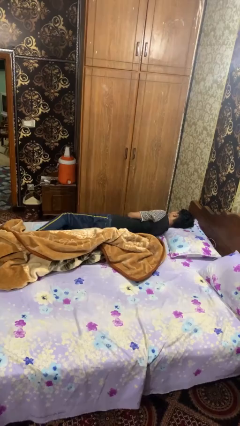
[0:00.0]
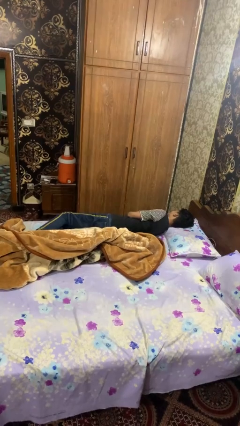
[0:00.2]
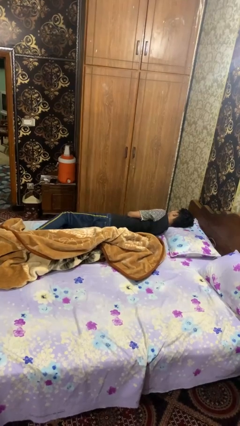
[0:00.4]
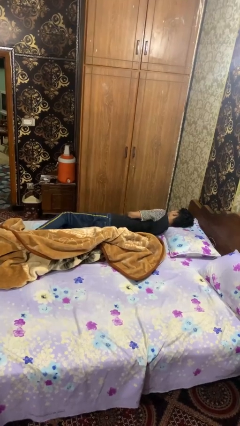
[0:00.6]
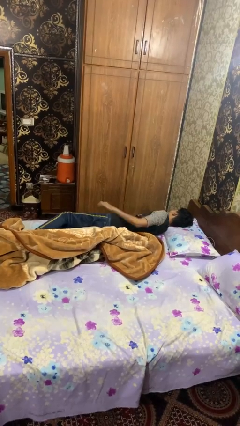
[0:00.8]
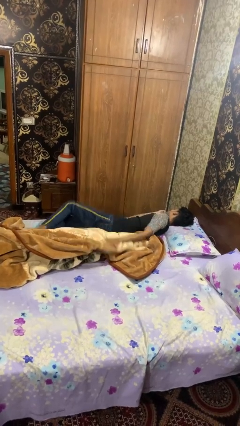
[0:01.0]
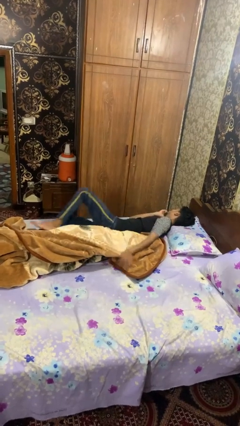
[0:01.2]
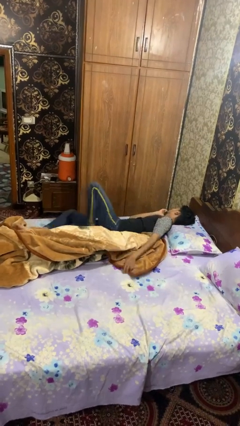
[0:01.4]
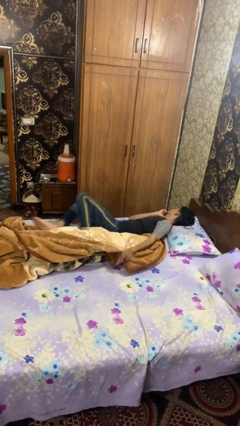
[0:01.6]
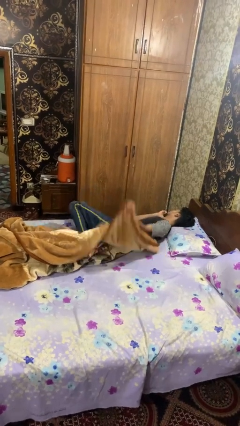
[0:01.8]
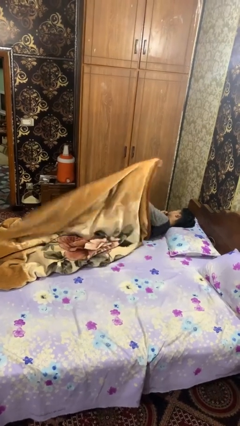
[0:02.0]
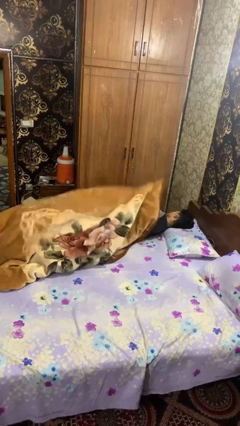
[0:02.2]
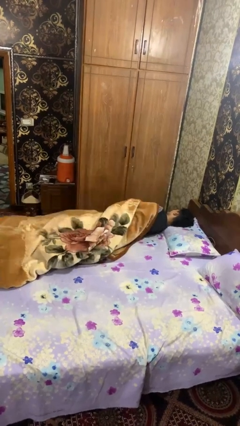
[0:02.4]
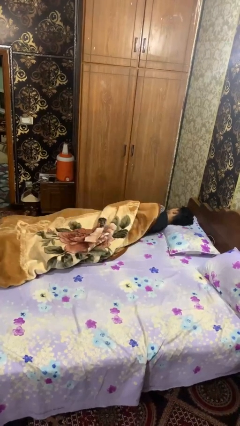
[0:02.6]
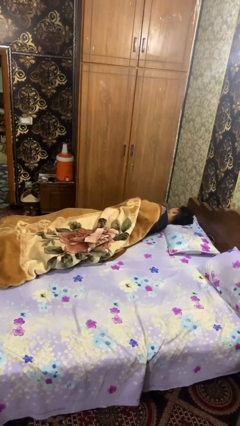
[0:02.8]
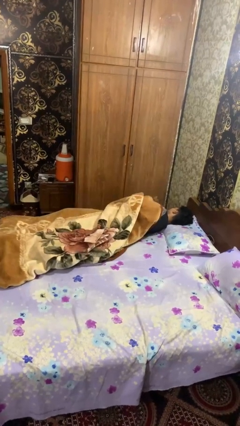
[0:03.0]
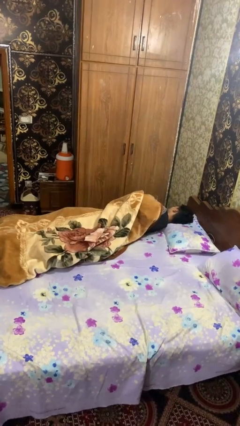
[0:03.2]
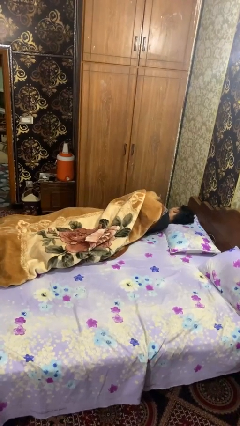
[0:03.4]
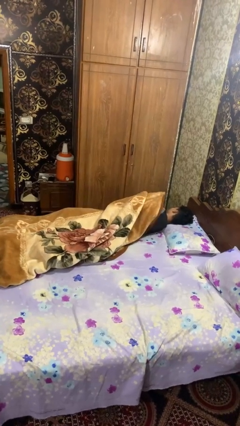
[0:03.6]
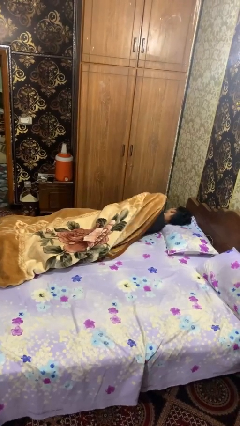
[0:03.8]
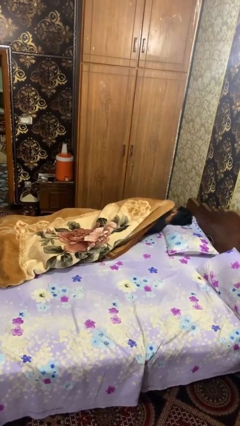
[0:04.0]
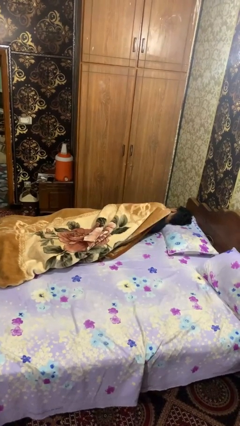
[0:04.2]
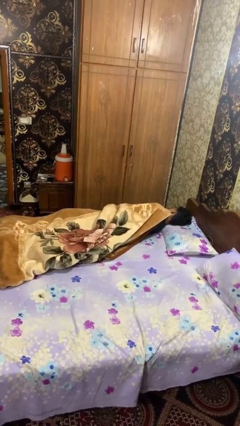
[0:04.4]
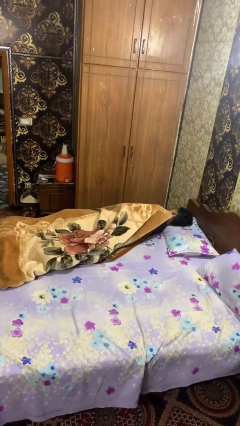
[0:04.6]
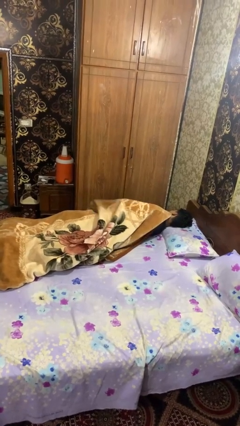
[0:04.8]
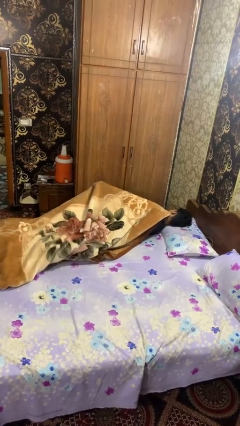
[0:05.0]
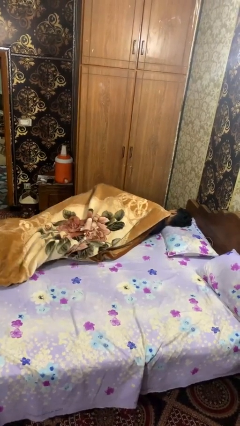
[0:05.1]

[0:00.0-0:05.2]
person covers with blanket

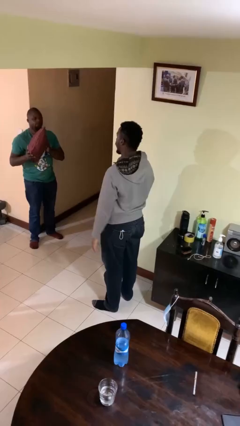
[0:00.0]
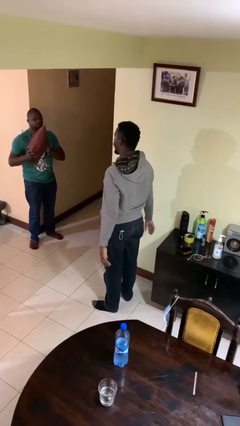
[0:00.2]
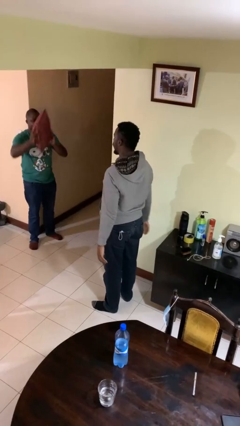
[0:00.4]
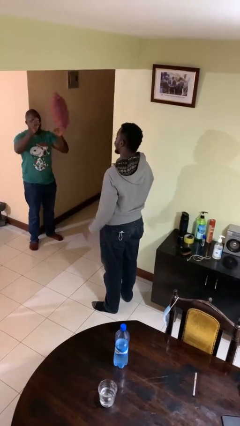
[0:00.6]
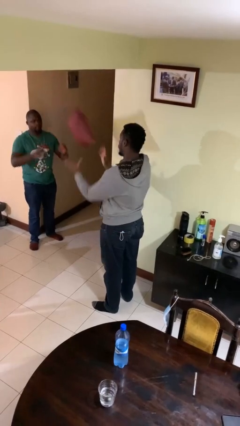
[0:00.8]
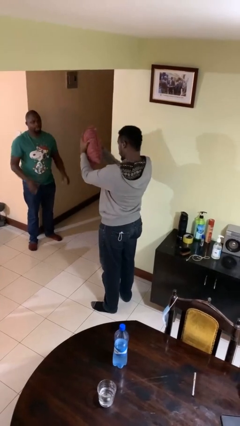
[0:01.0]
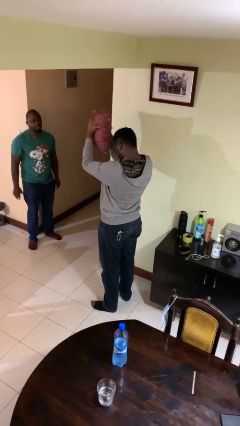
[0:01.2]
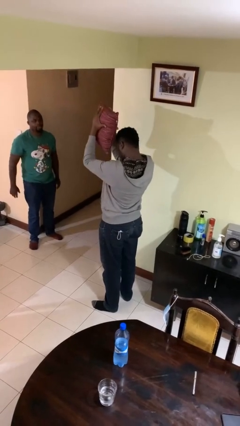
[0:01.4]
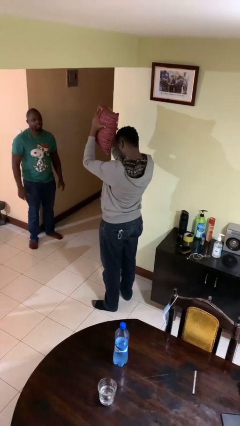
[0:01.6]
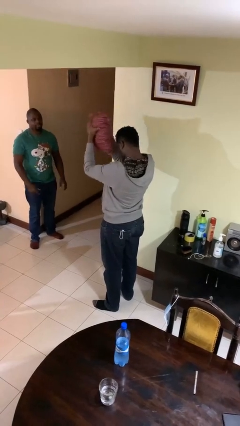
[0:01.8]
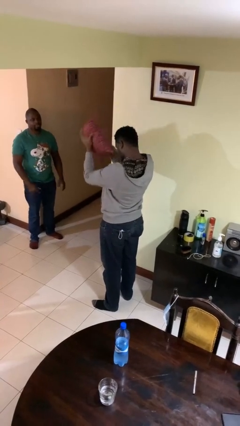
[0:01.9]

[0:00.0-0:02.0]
person catches object from person

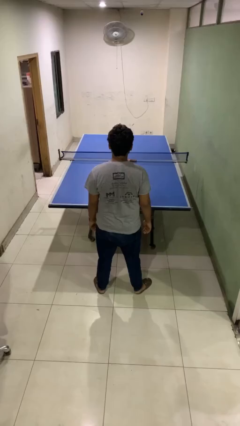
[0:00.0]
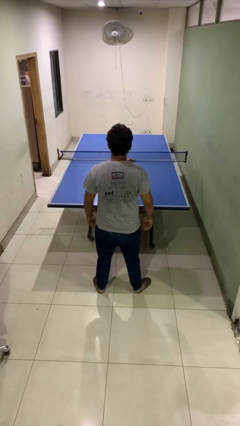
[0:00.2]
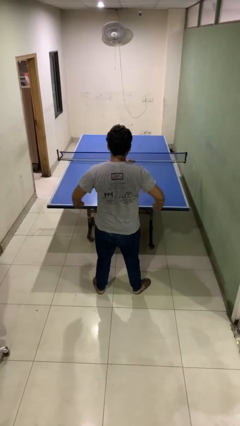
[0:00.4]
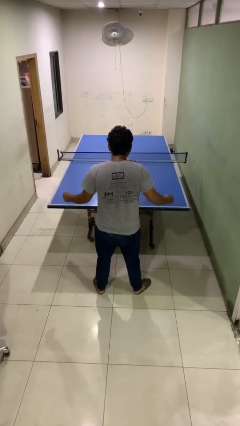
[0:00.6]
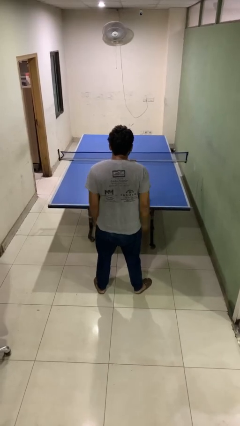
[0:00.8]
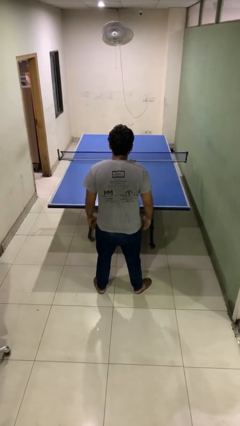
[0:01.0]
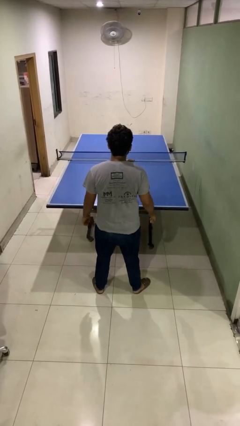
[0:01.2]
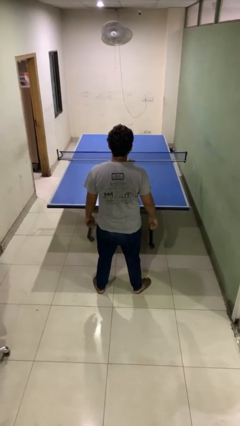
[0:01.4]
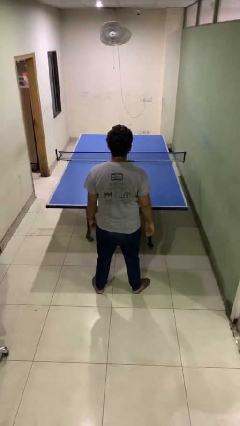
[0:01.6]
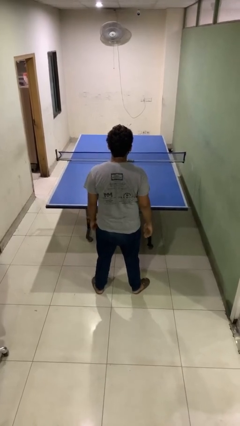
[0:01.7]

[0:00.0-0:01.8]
person slaps hands on thighs

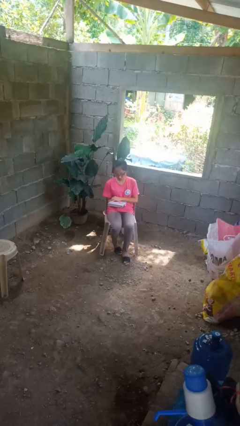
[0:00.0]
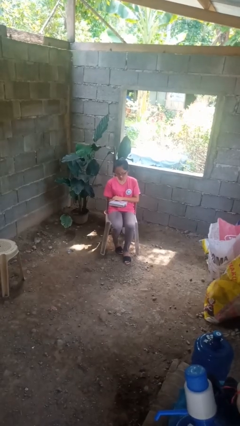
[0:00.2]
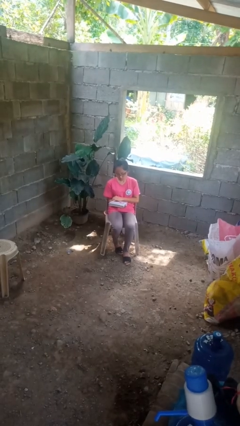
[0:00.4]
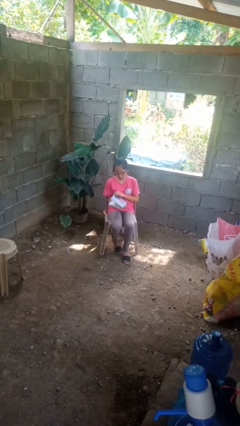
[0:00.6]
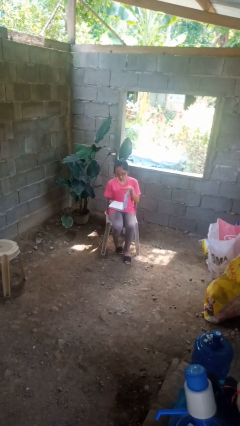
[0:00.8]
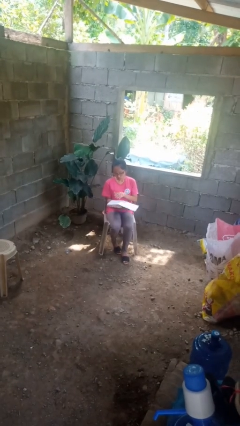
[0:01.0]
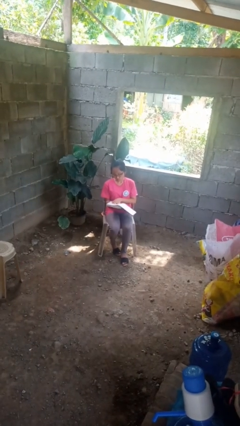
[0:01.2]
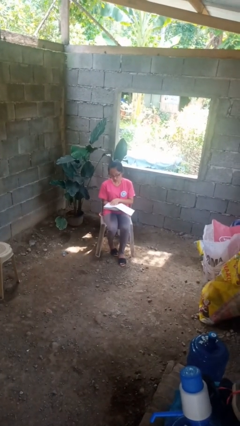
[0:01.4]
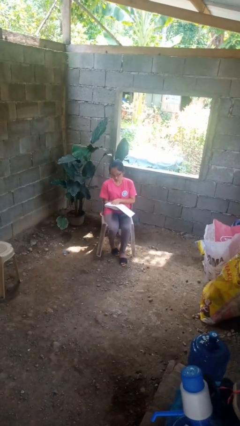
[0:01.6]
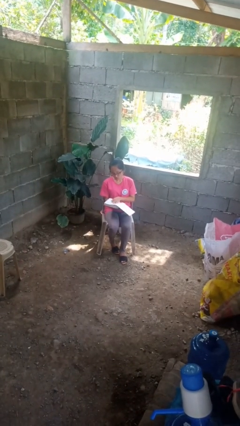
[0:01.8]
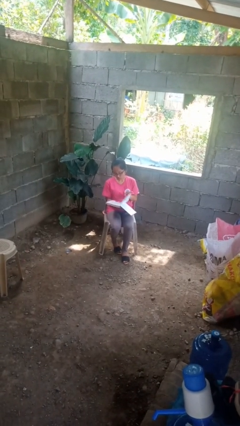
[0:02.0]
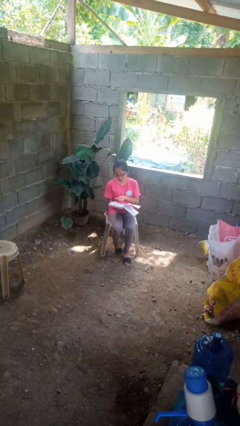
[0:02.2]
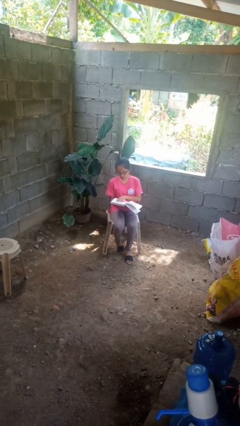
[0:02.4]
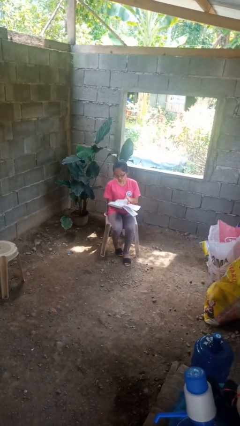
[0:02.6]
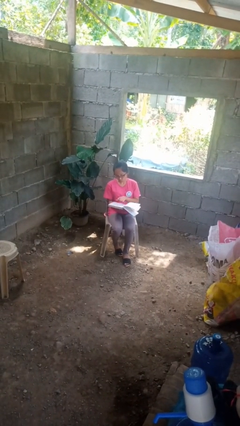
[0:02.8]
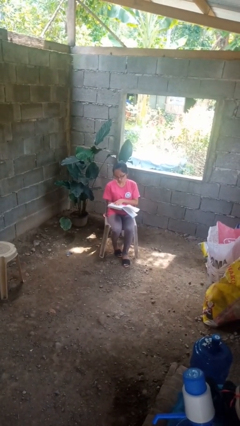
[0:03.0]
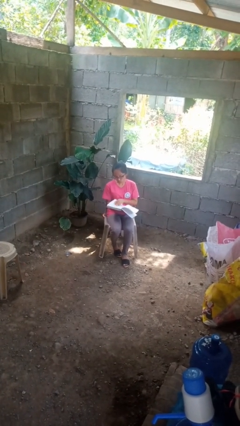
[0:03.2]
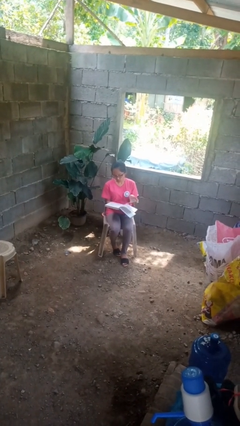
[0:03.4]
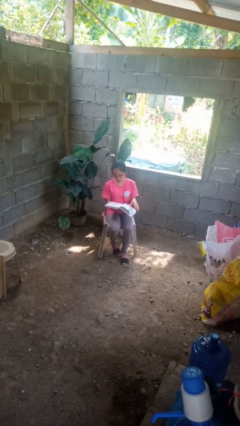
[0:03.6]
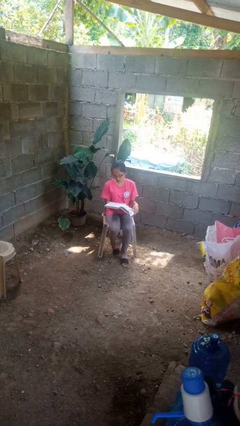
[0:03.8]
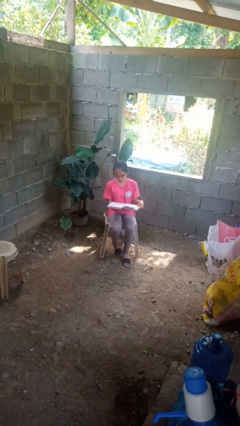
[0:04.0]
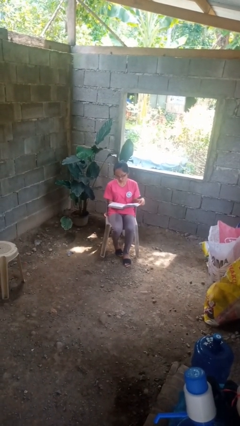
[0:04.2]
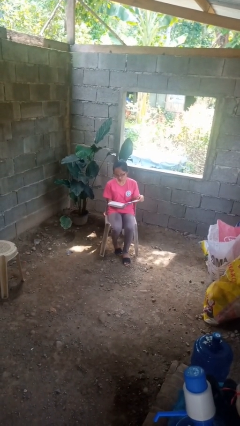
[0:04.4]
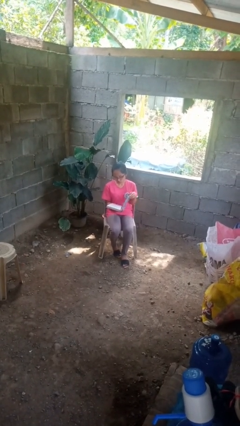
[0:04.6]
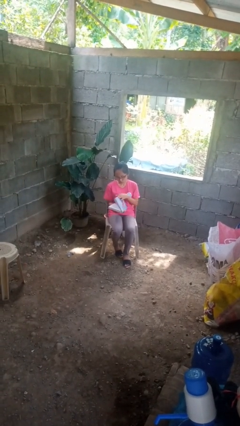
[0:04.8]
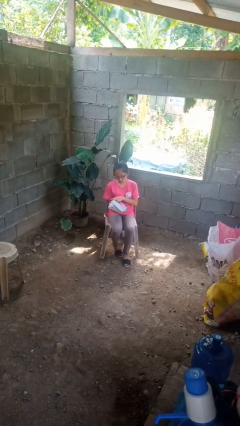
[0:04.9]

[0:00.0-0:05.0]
person reads book

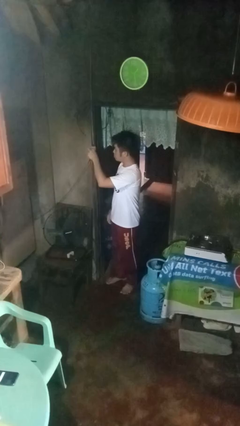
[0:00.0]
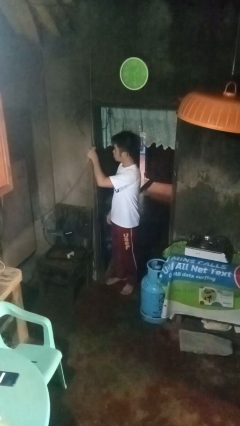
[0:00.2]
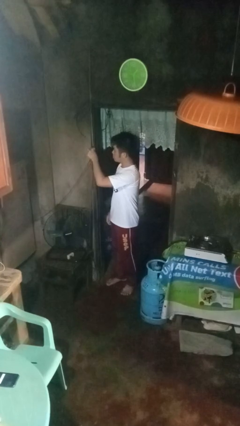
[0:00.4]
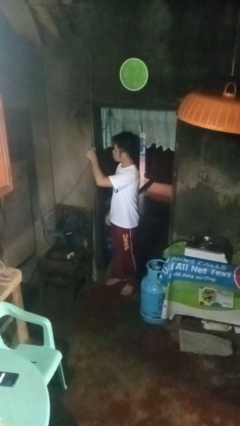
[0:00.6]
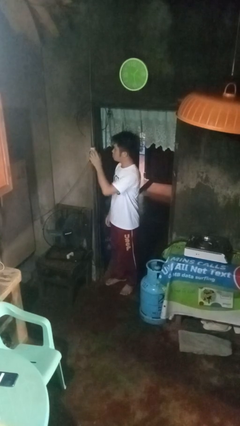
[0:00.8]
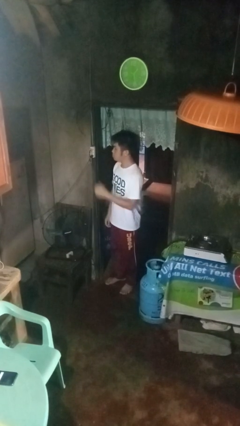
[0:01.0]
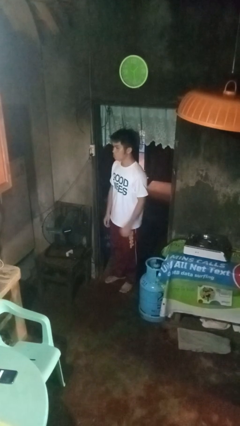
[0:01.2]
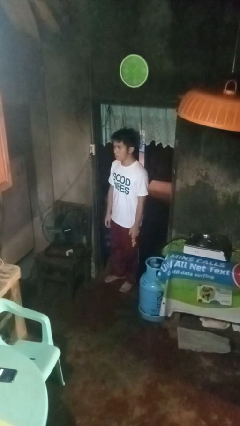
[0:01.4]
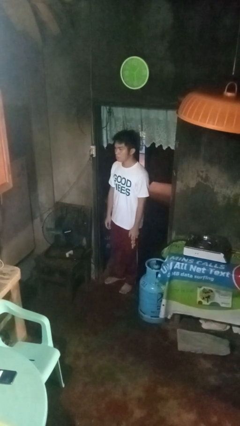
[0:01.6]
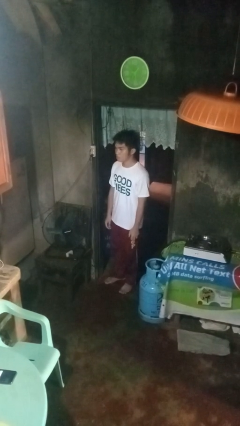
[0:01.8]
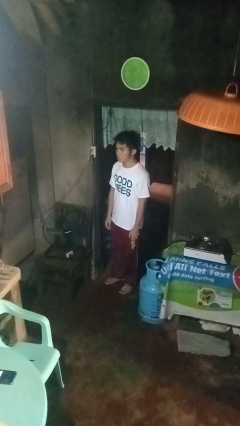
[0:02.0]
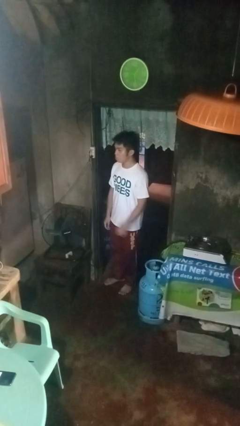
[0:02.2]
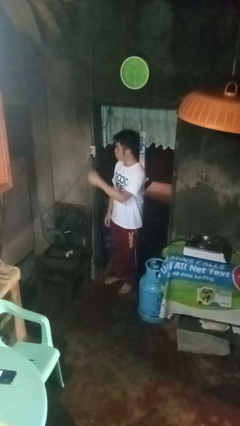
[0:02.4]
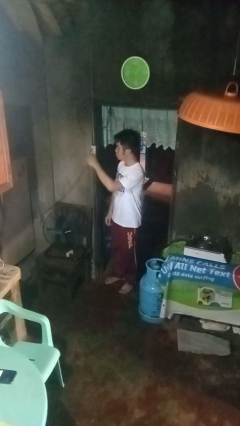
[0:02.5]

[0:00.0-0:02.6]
person plugs into electrical socket

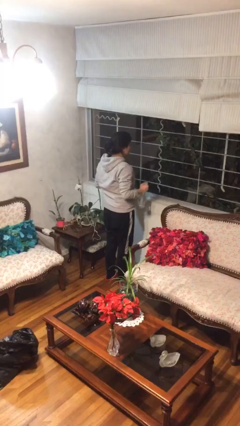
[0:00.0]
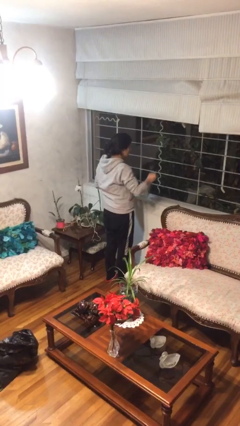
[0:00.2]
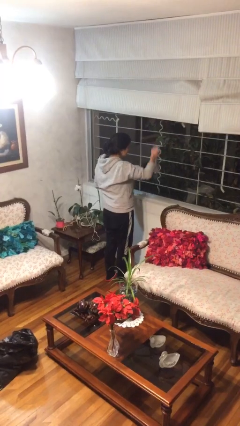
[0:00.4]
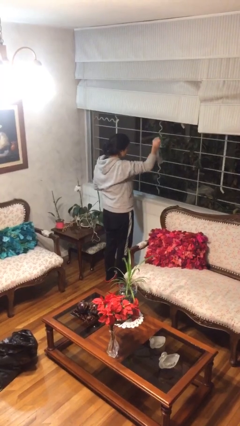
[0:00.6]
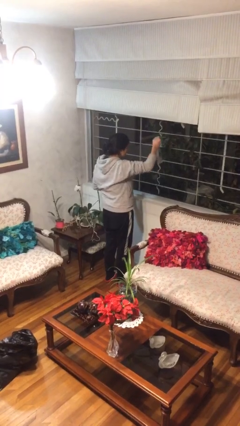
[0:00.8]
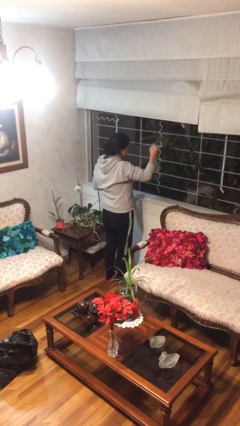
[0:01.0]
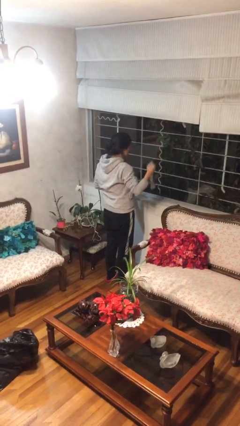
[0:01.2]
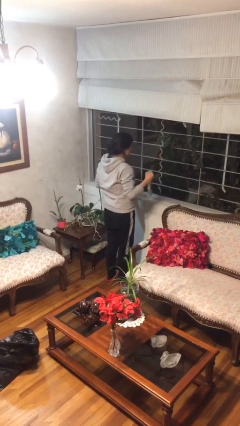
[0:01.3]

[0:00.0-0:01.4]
person sprays from bottle
